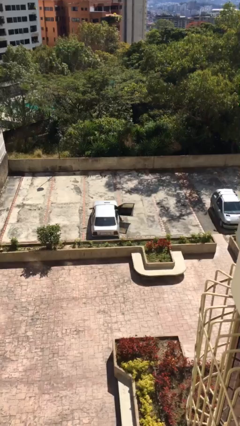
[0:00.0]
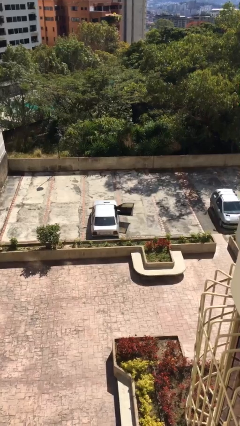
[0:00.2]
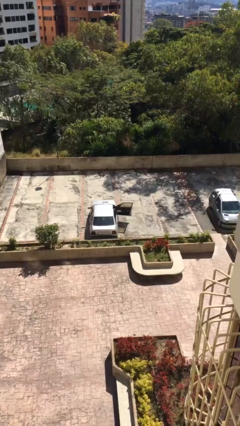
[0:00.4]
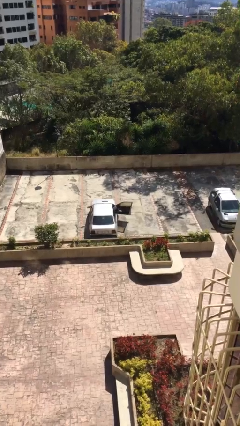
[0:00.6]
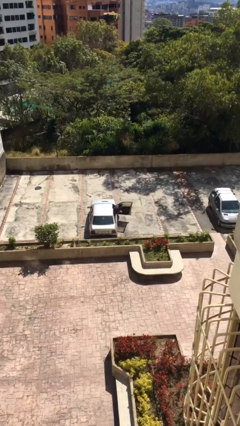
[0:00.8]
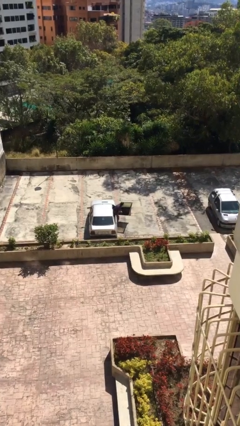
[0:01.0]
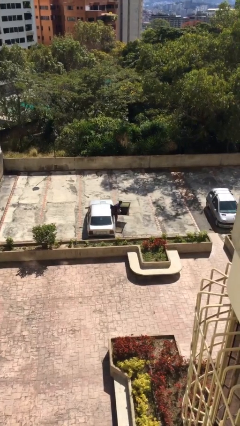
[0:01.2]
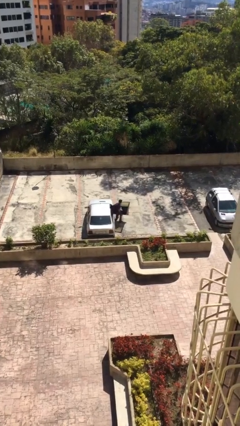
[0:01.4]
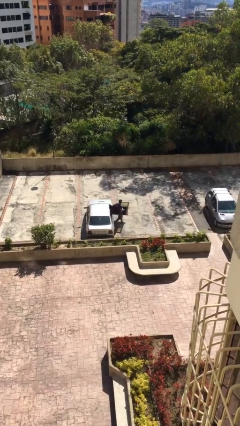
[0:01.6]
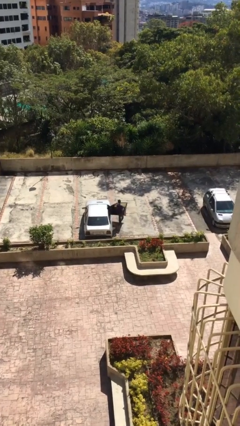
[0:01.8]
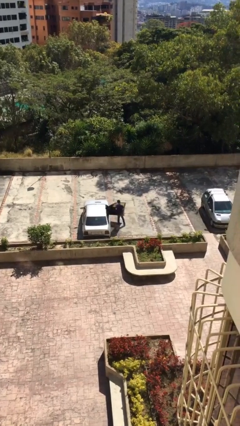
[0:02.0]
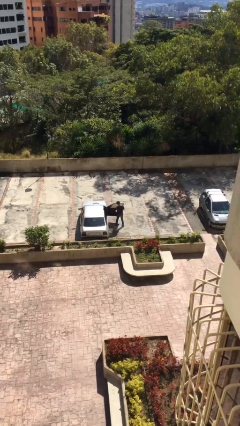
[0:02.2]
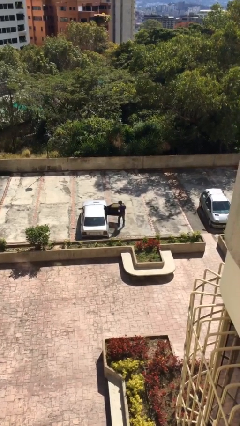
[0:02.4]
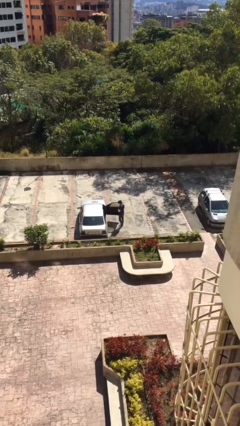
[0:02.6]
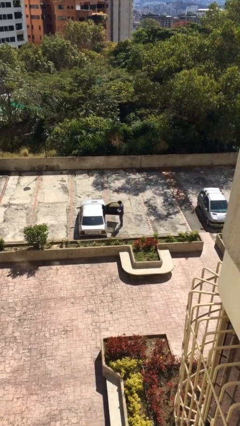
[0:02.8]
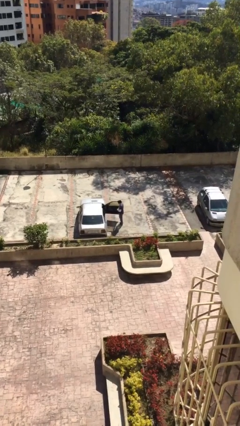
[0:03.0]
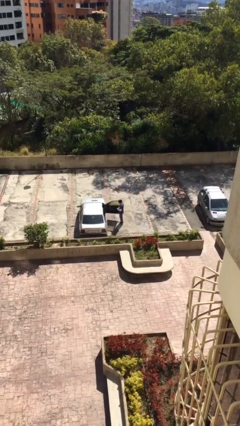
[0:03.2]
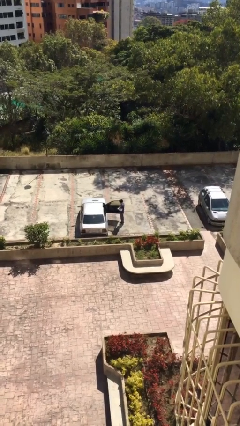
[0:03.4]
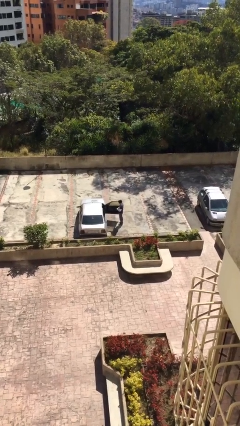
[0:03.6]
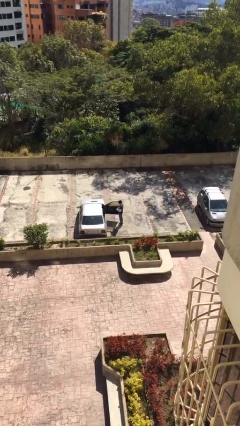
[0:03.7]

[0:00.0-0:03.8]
person exits car

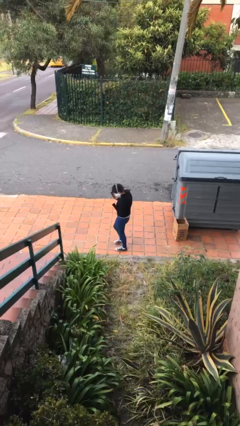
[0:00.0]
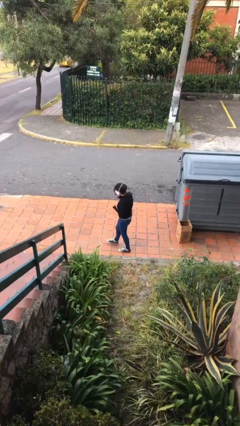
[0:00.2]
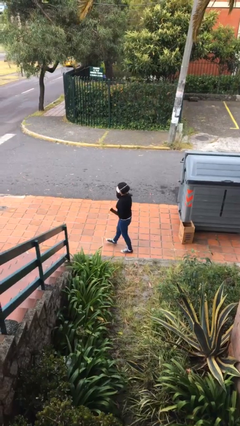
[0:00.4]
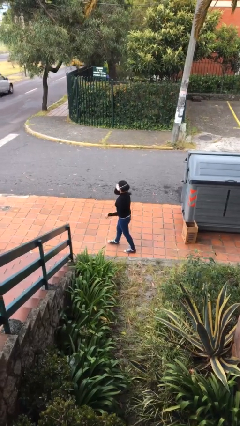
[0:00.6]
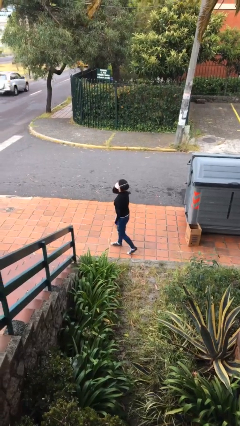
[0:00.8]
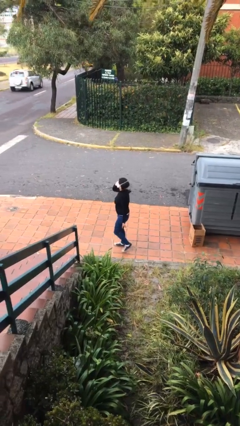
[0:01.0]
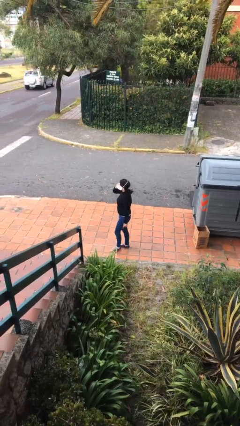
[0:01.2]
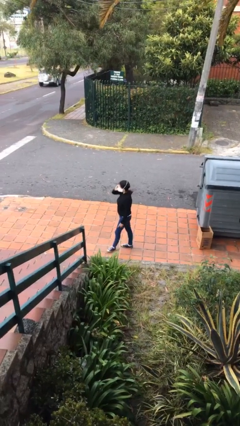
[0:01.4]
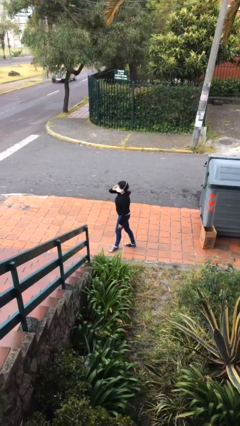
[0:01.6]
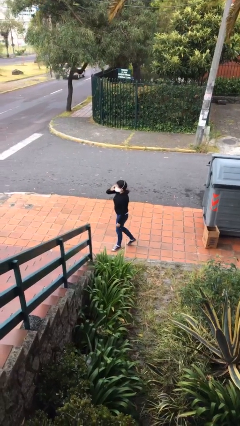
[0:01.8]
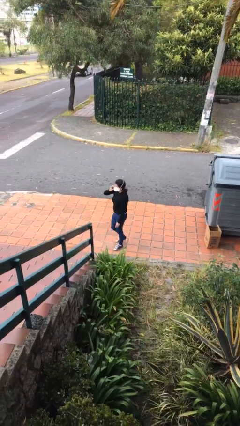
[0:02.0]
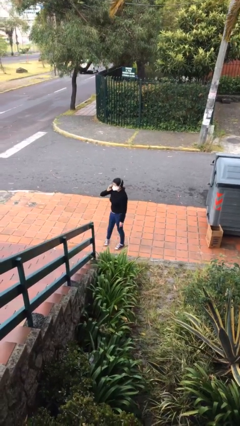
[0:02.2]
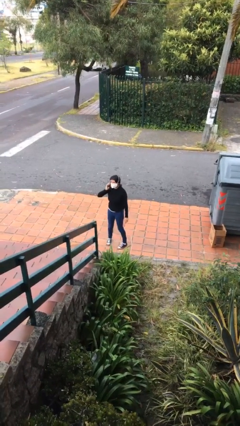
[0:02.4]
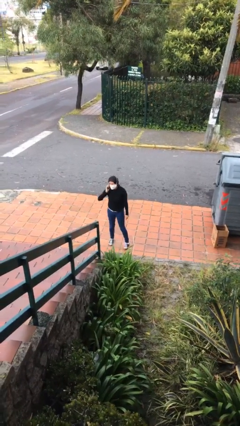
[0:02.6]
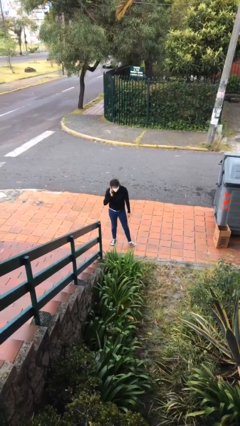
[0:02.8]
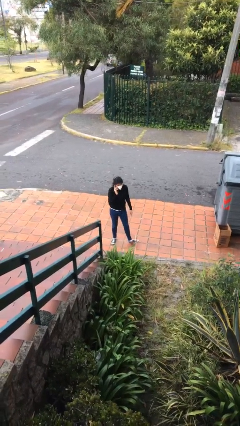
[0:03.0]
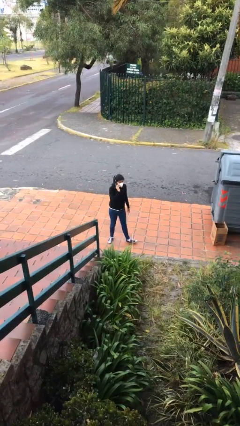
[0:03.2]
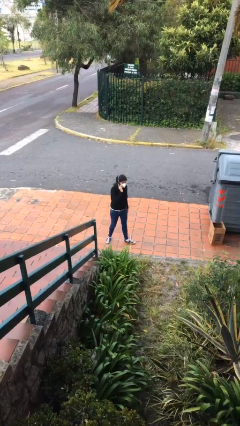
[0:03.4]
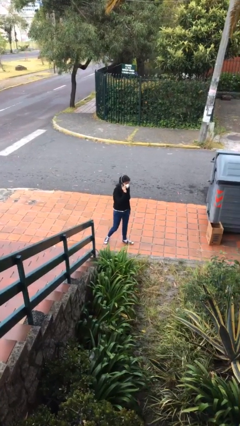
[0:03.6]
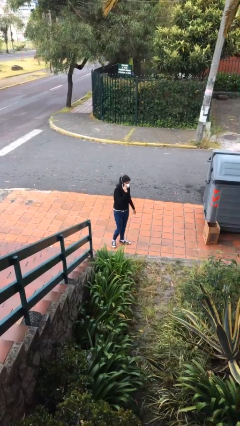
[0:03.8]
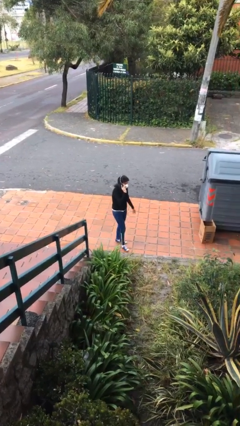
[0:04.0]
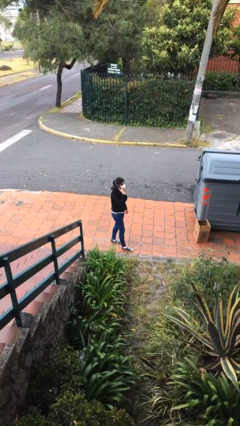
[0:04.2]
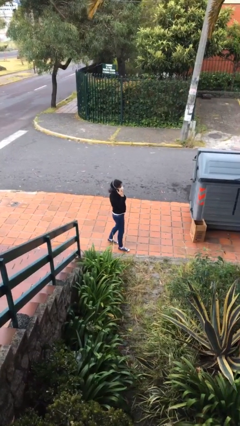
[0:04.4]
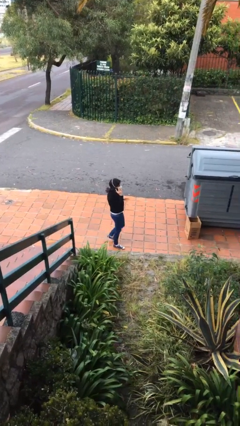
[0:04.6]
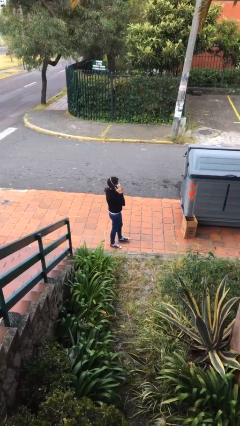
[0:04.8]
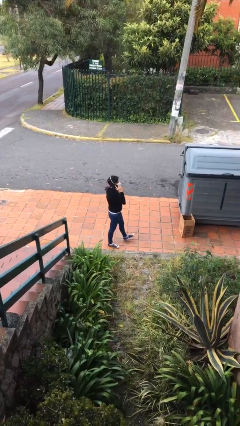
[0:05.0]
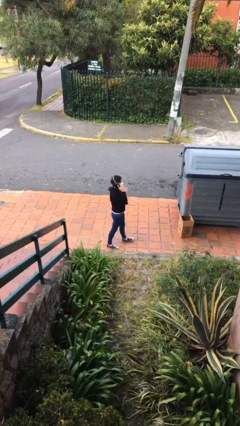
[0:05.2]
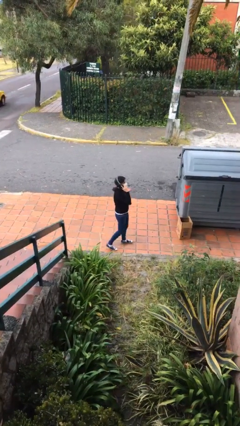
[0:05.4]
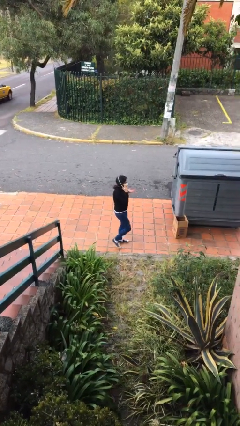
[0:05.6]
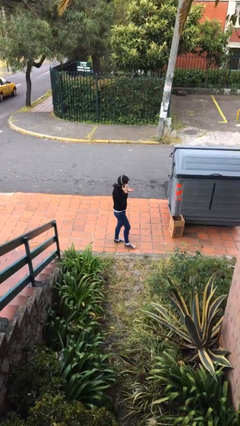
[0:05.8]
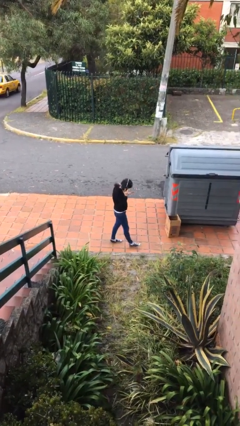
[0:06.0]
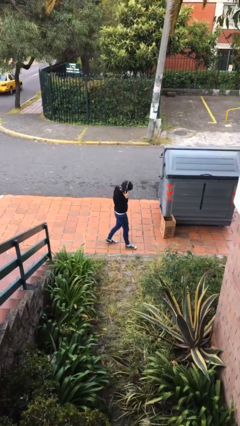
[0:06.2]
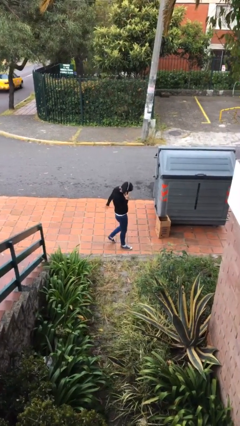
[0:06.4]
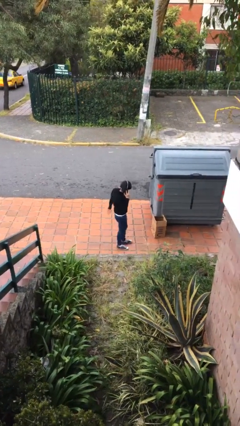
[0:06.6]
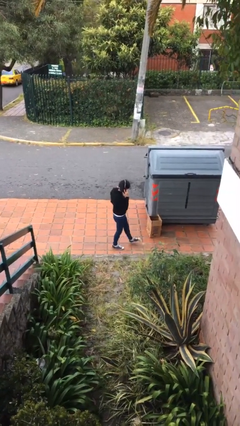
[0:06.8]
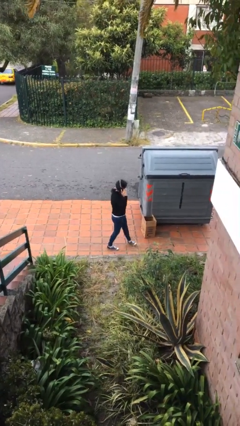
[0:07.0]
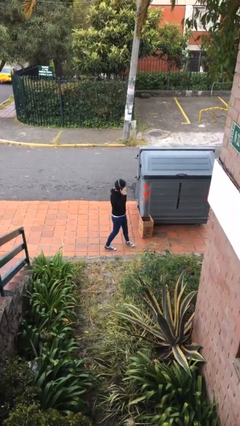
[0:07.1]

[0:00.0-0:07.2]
person talks on phone

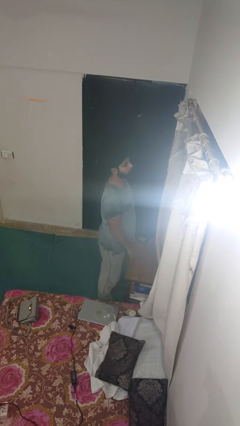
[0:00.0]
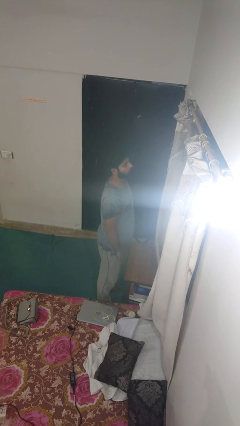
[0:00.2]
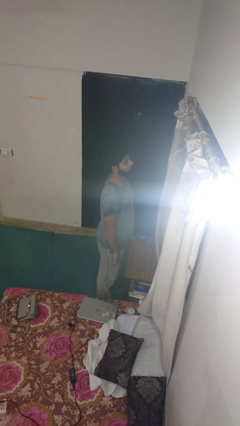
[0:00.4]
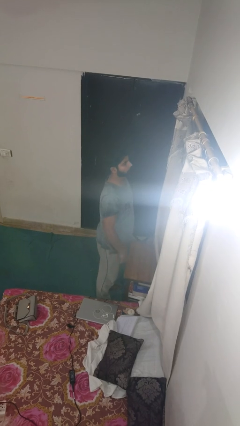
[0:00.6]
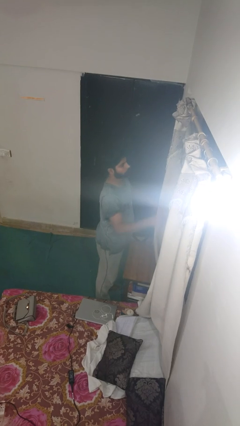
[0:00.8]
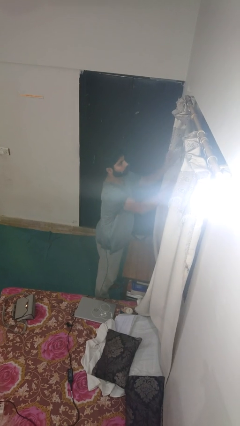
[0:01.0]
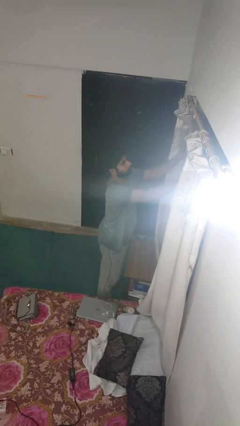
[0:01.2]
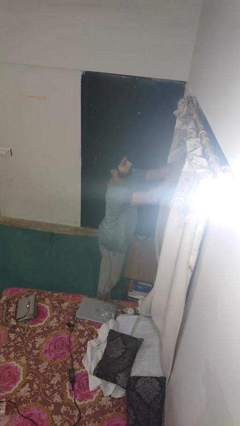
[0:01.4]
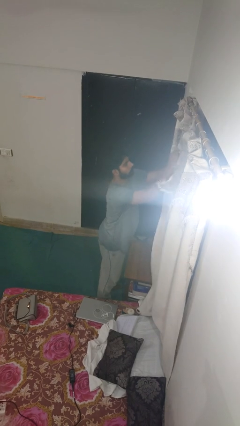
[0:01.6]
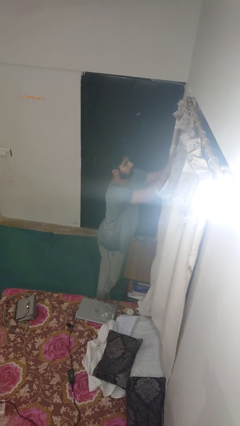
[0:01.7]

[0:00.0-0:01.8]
person closes curtains

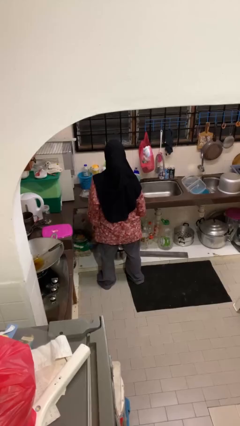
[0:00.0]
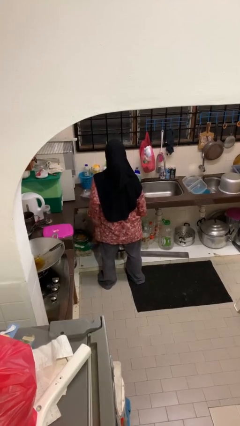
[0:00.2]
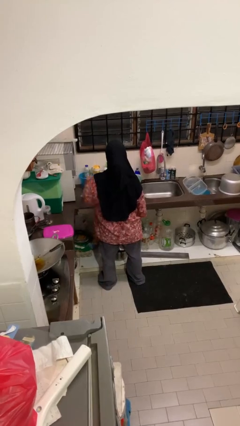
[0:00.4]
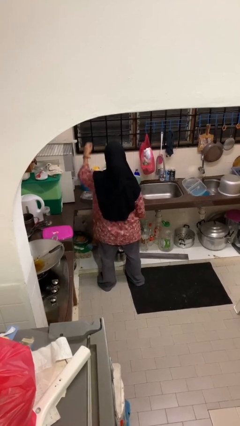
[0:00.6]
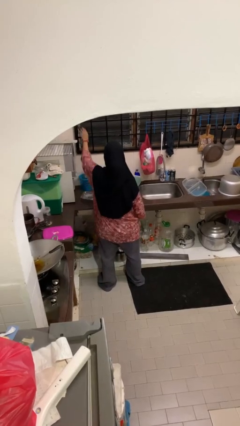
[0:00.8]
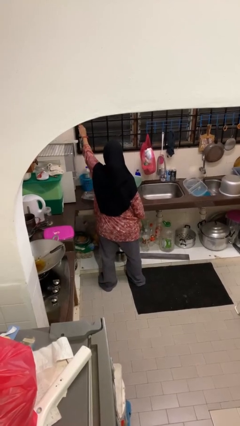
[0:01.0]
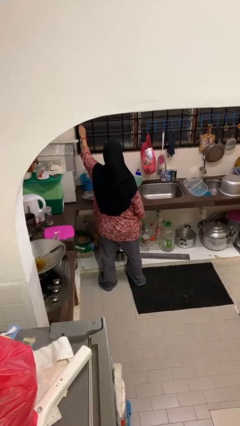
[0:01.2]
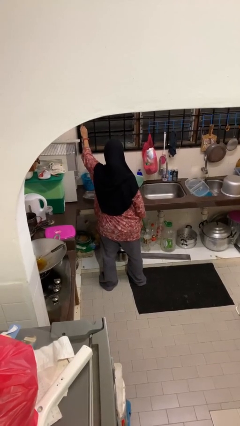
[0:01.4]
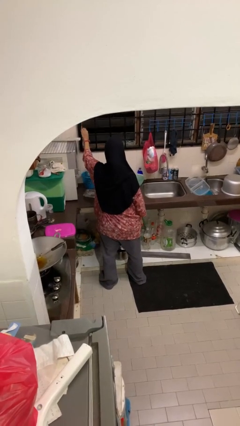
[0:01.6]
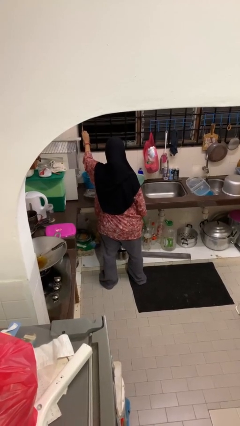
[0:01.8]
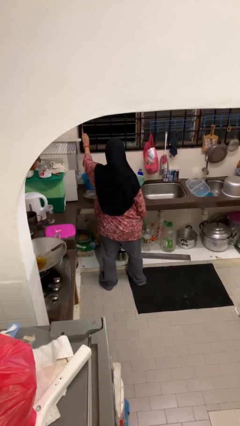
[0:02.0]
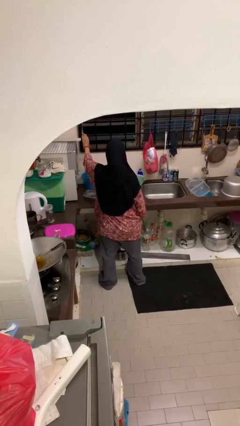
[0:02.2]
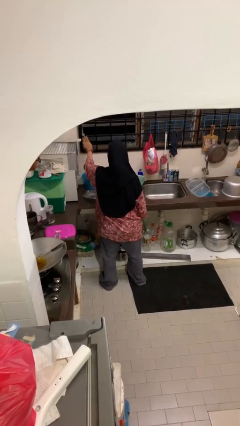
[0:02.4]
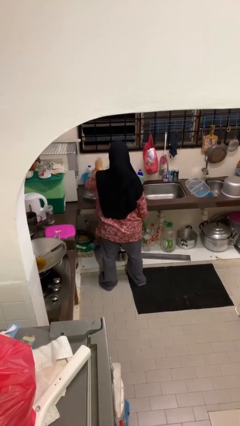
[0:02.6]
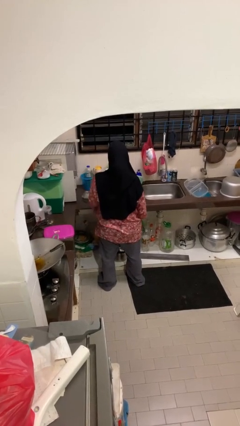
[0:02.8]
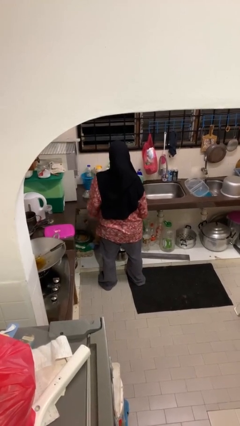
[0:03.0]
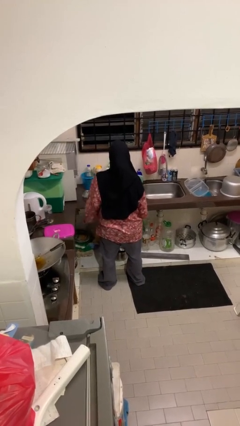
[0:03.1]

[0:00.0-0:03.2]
person opens home window

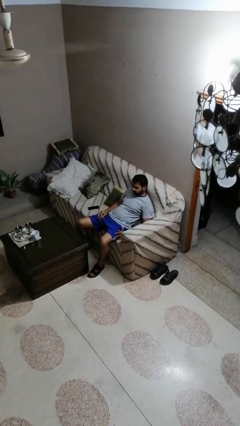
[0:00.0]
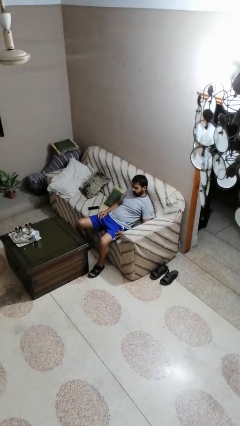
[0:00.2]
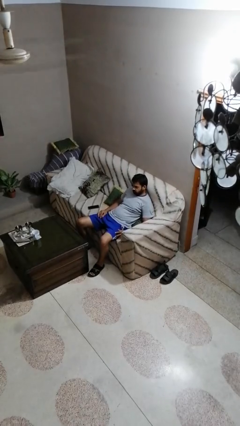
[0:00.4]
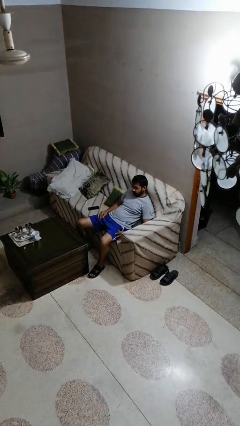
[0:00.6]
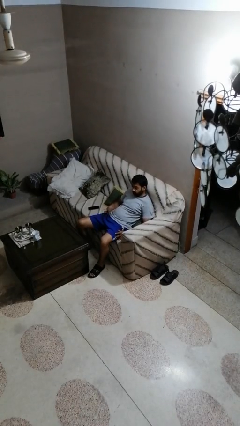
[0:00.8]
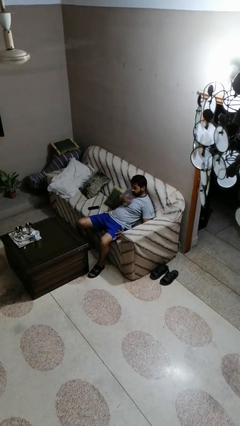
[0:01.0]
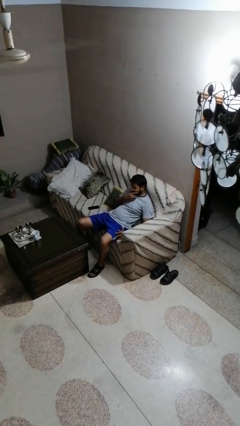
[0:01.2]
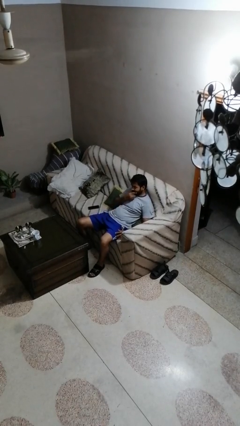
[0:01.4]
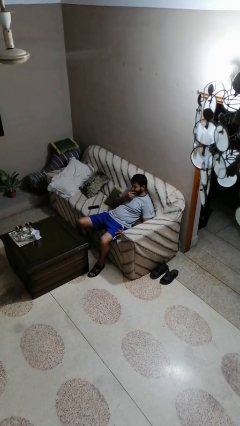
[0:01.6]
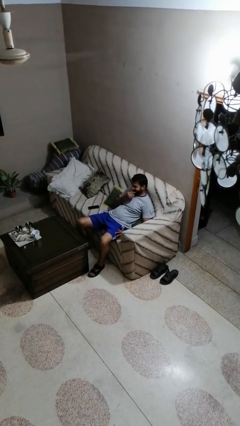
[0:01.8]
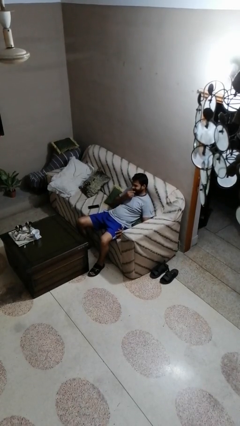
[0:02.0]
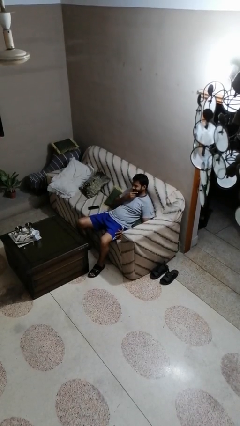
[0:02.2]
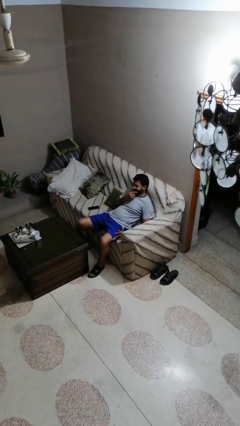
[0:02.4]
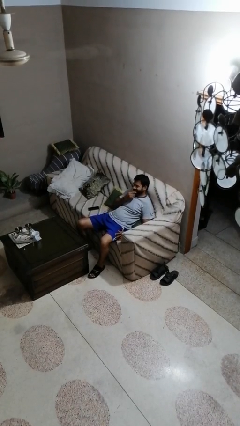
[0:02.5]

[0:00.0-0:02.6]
person strokes chin
